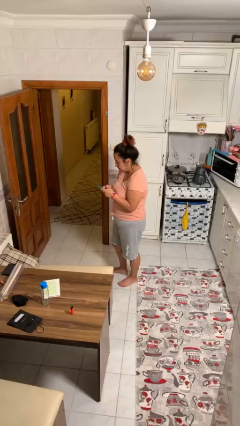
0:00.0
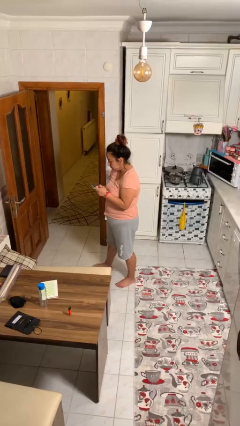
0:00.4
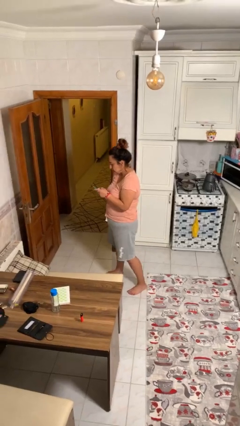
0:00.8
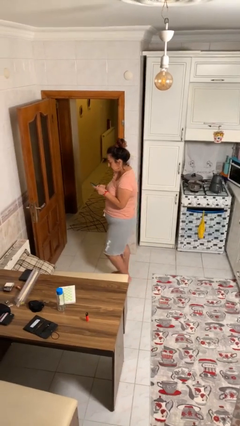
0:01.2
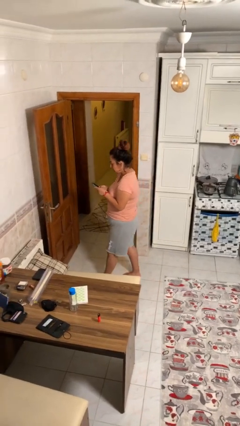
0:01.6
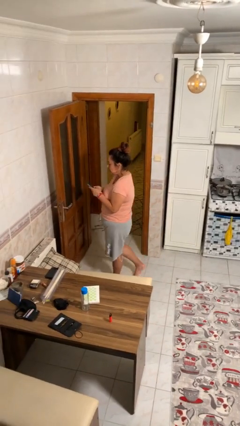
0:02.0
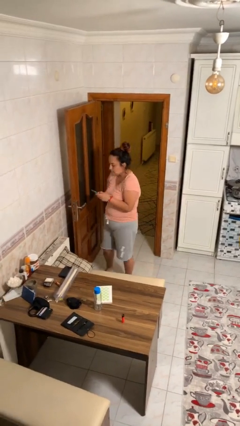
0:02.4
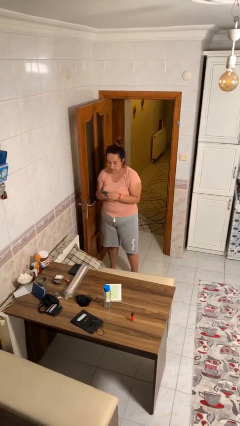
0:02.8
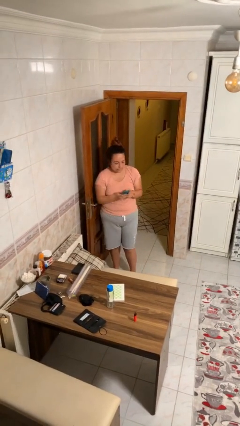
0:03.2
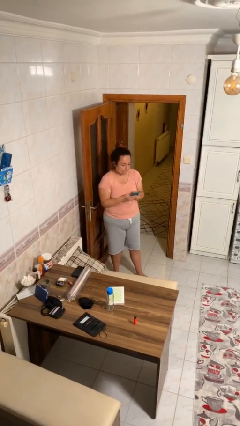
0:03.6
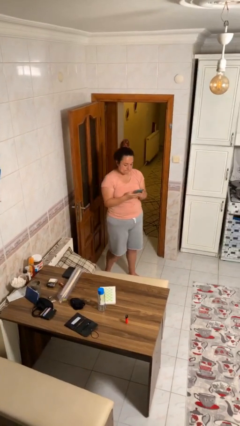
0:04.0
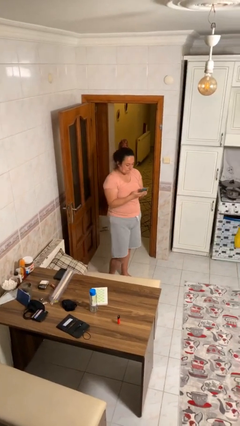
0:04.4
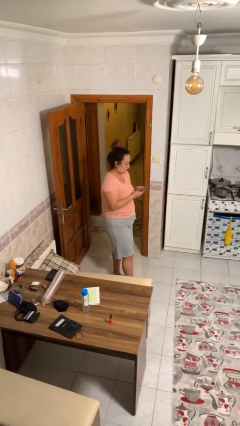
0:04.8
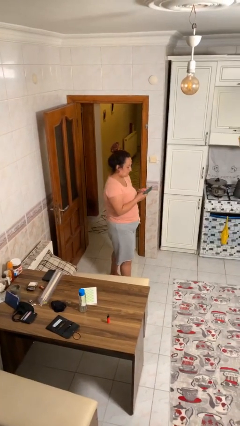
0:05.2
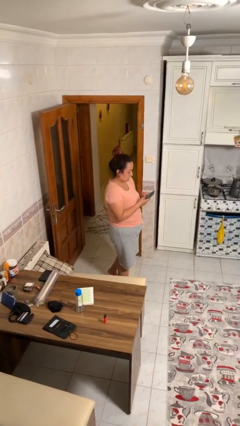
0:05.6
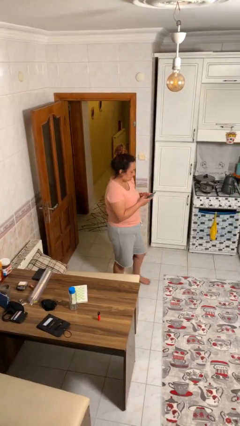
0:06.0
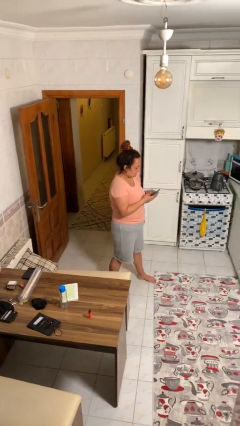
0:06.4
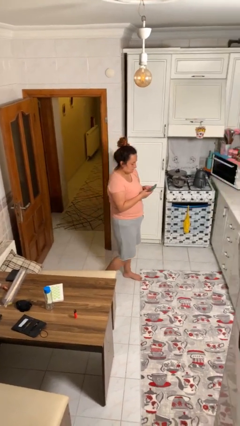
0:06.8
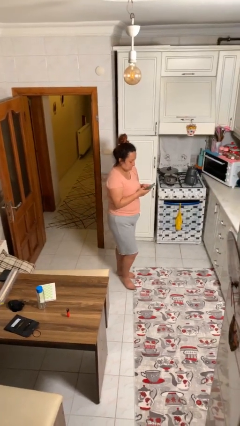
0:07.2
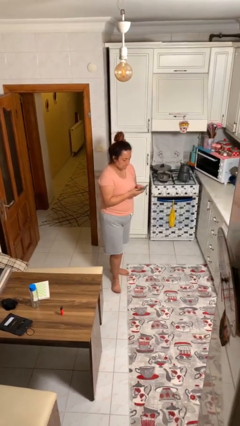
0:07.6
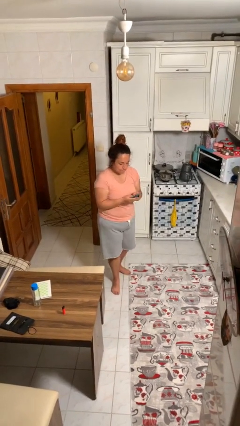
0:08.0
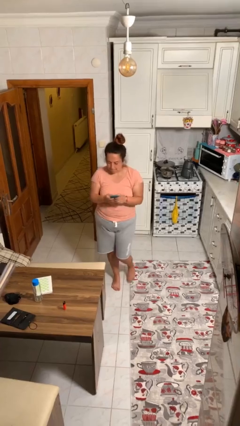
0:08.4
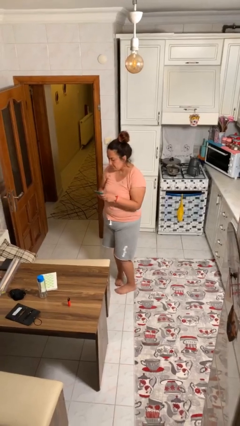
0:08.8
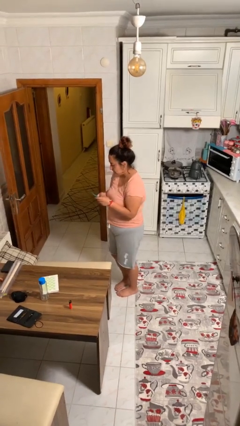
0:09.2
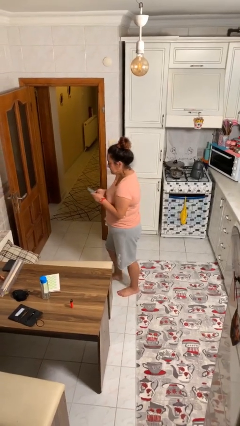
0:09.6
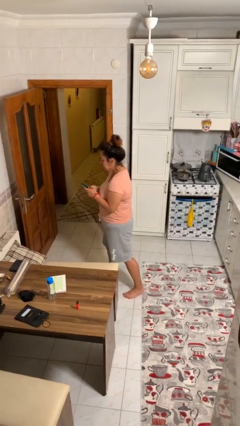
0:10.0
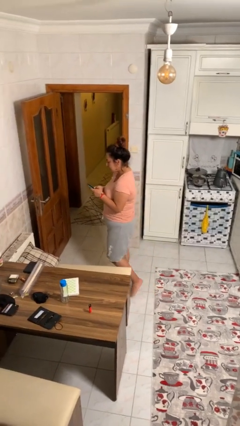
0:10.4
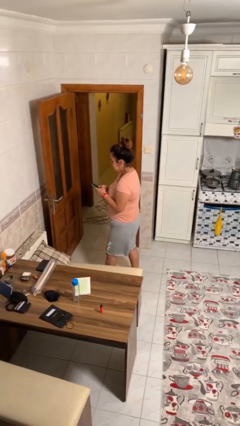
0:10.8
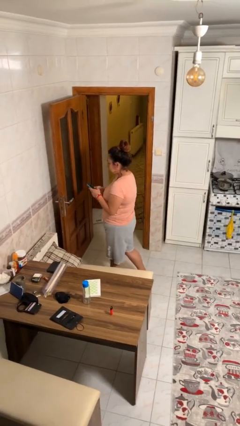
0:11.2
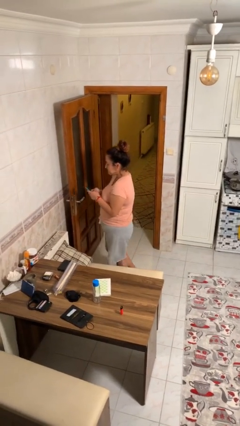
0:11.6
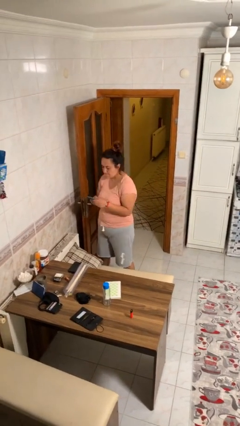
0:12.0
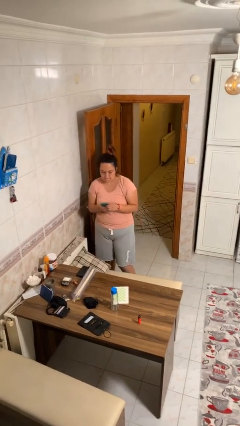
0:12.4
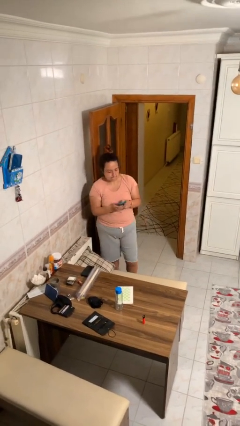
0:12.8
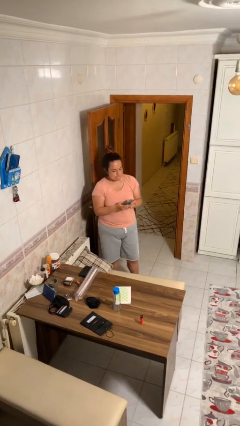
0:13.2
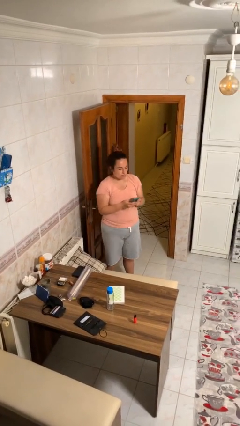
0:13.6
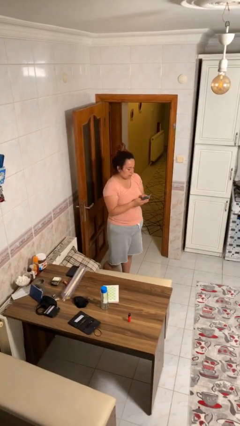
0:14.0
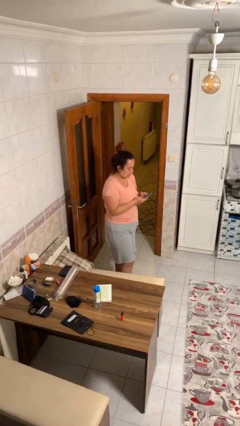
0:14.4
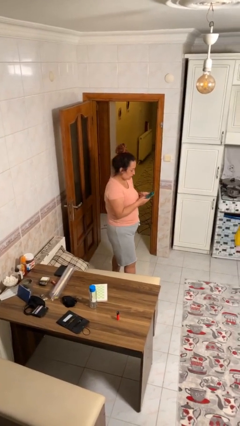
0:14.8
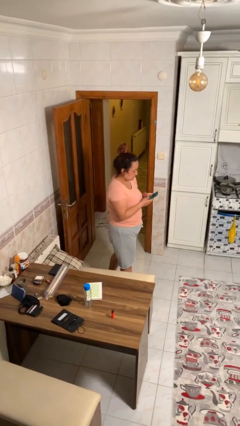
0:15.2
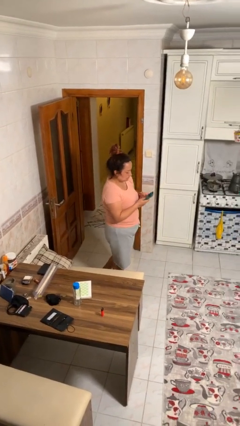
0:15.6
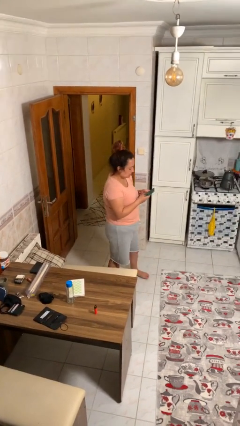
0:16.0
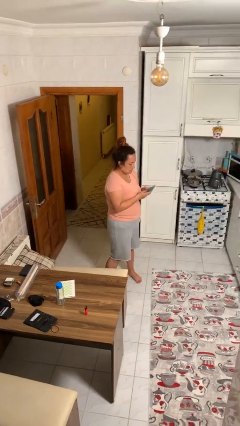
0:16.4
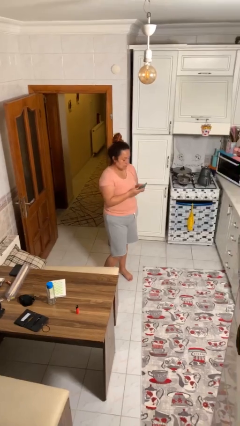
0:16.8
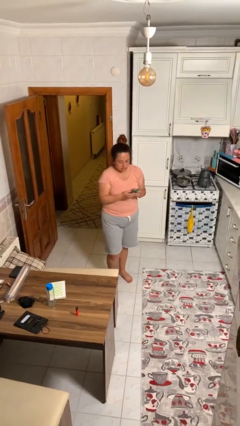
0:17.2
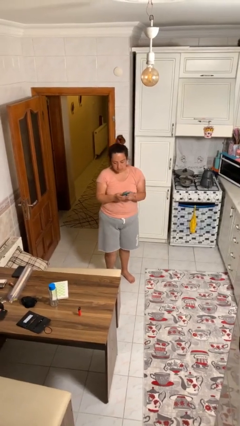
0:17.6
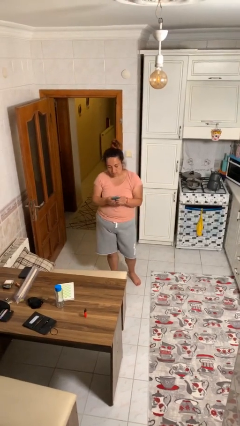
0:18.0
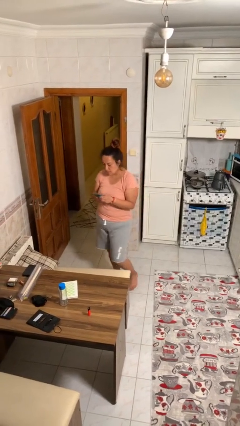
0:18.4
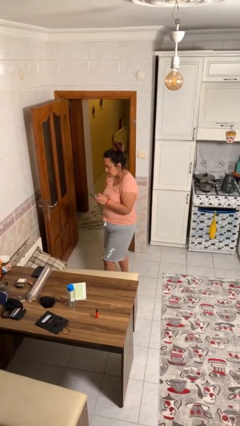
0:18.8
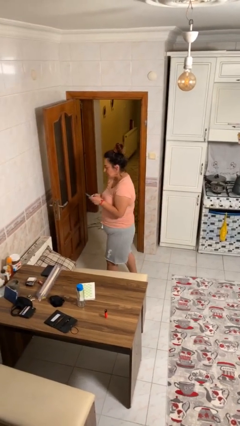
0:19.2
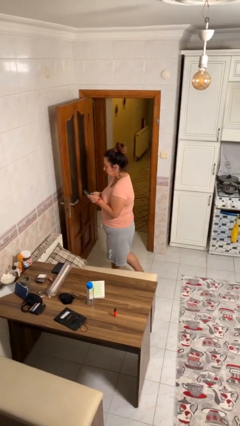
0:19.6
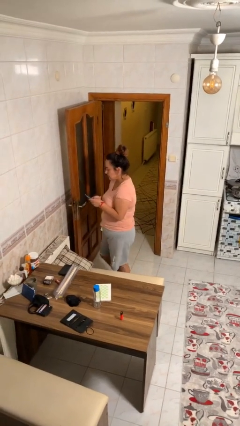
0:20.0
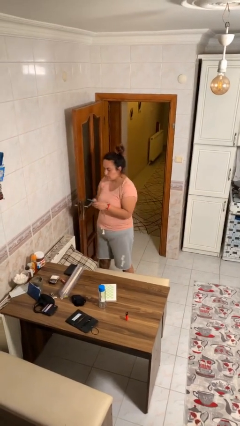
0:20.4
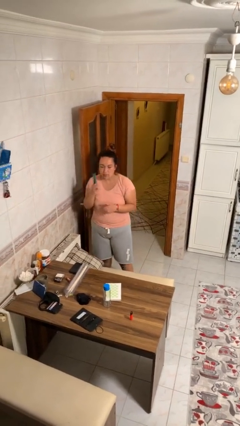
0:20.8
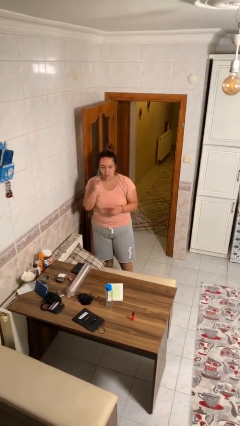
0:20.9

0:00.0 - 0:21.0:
person texts on phone

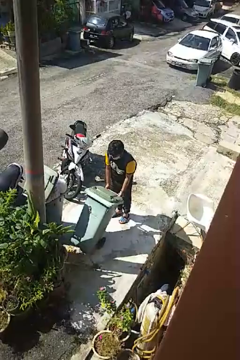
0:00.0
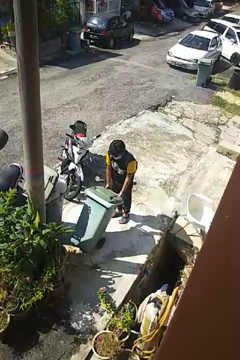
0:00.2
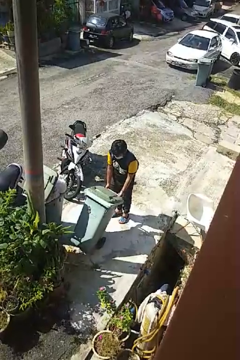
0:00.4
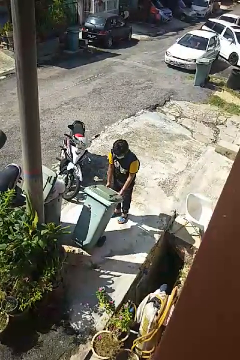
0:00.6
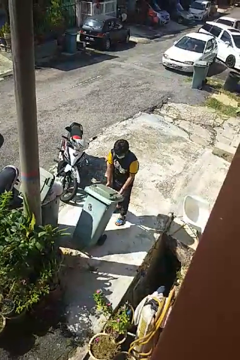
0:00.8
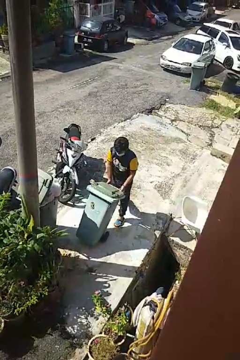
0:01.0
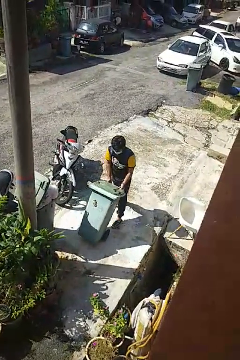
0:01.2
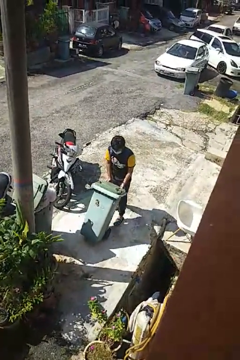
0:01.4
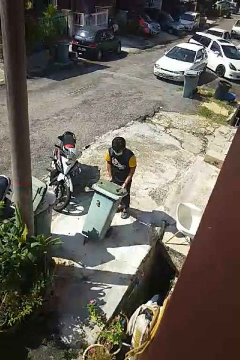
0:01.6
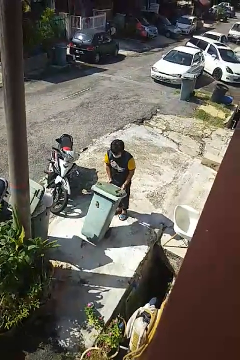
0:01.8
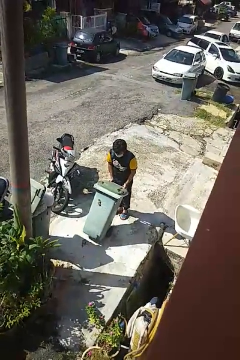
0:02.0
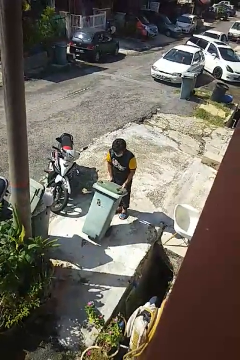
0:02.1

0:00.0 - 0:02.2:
person pulls wheeled trashcan

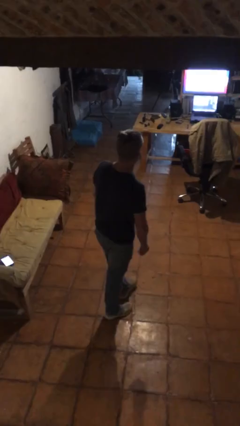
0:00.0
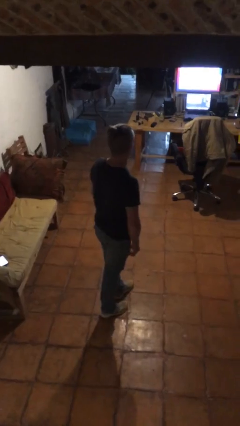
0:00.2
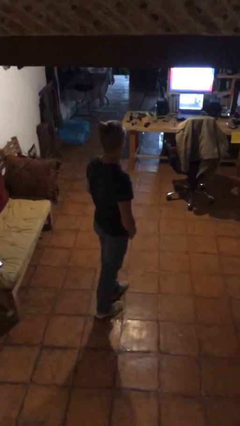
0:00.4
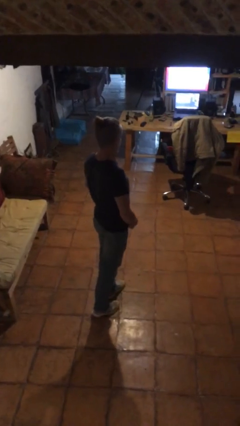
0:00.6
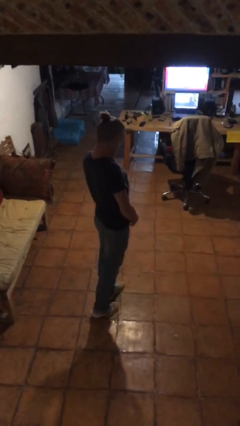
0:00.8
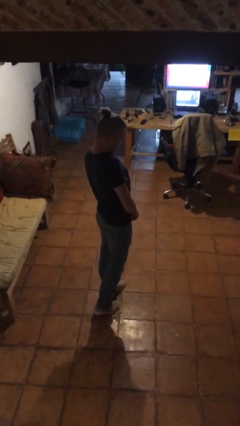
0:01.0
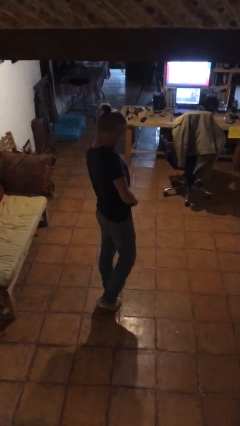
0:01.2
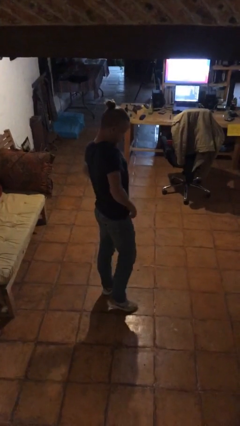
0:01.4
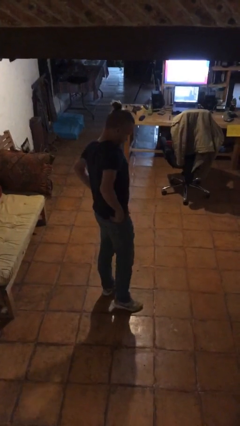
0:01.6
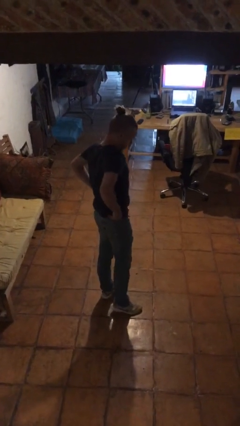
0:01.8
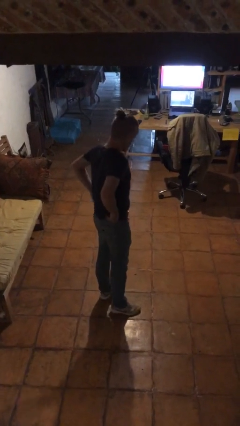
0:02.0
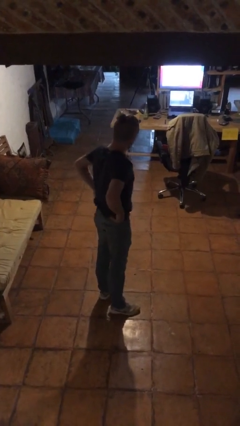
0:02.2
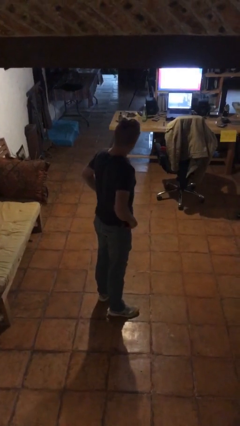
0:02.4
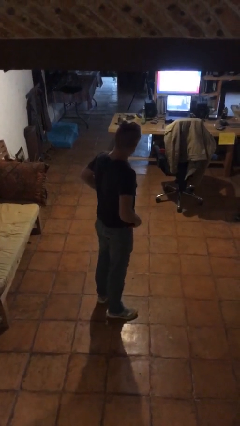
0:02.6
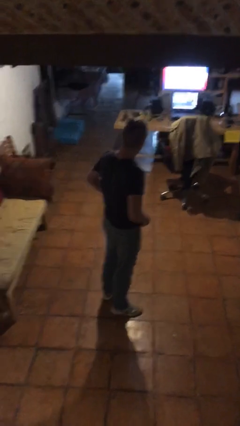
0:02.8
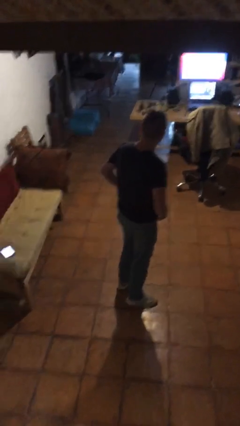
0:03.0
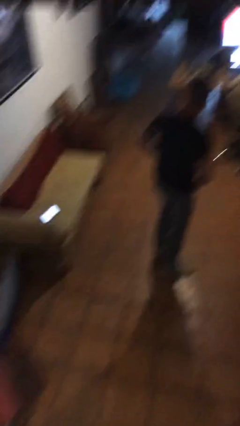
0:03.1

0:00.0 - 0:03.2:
person hikes up pants

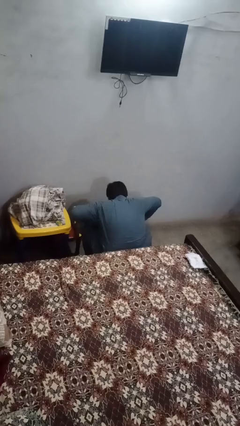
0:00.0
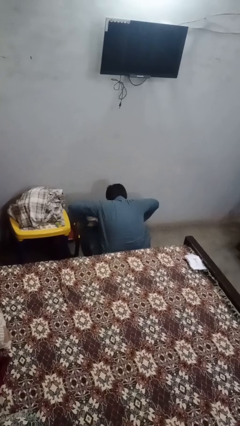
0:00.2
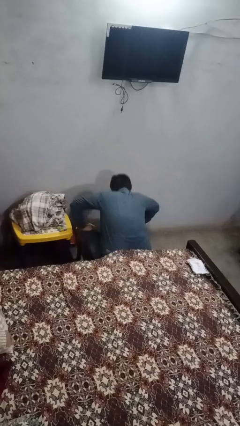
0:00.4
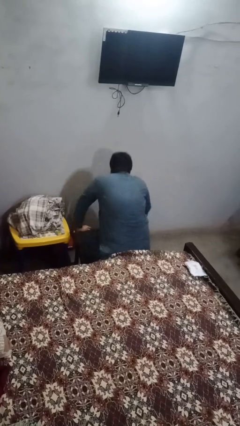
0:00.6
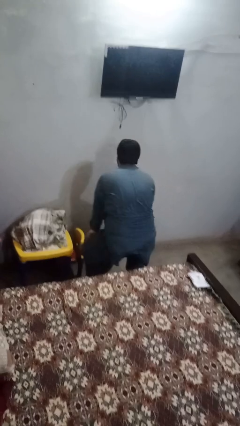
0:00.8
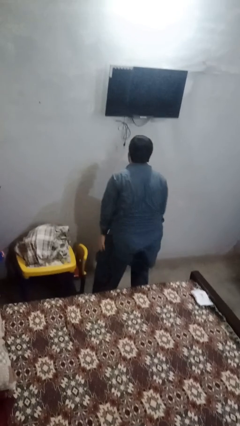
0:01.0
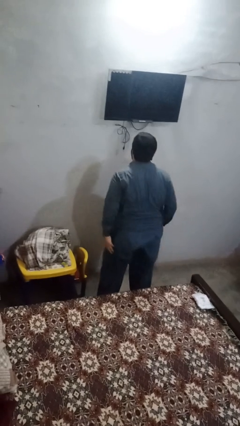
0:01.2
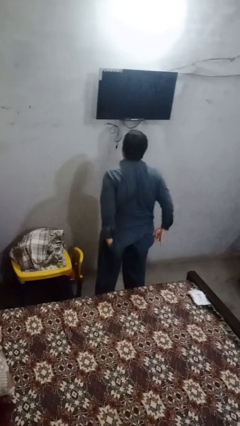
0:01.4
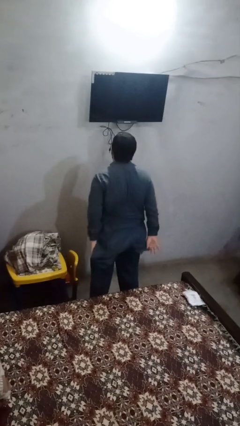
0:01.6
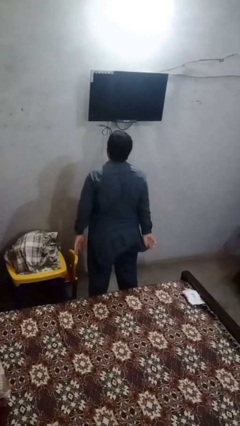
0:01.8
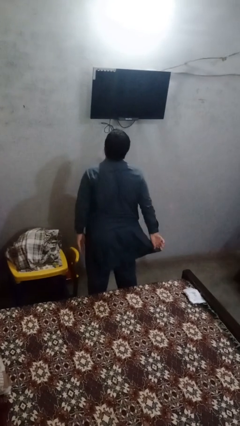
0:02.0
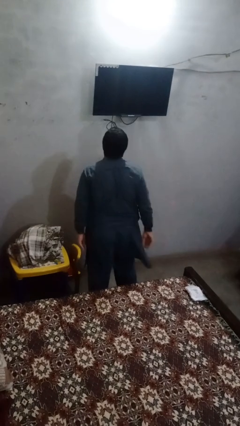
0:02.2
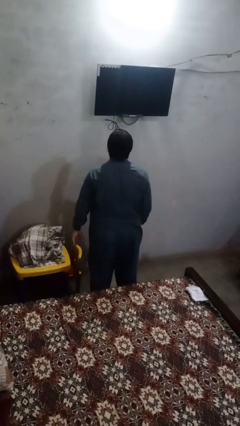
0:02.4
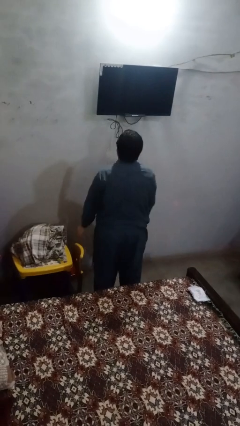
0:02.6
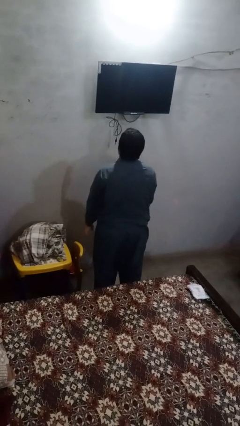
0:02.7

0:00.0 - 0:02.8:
person stands up from floor
